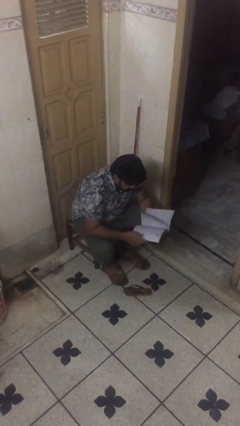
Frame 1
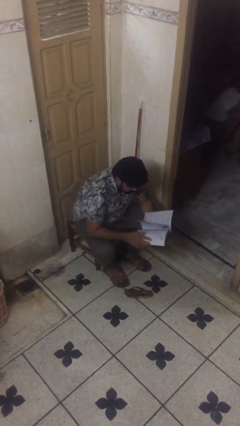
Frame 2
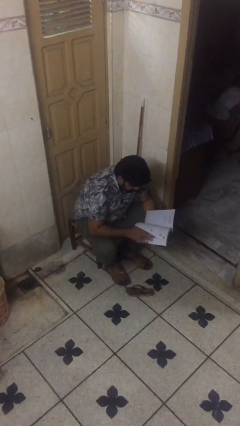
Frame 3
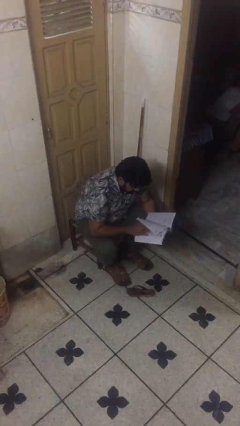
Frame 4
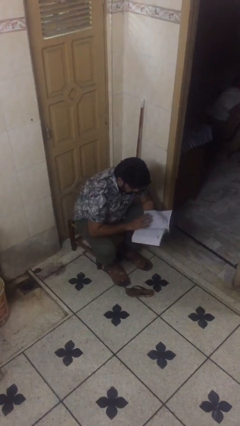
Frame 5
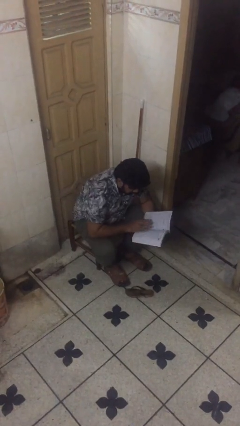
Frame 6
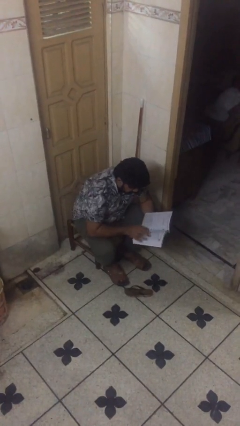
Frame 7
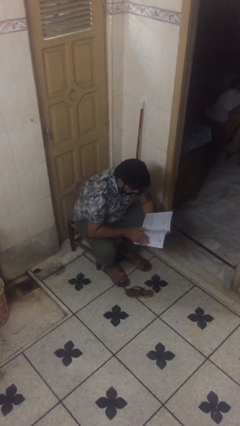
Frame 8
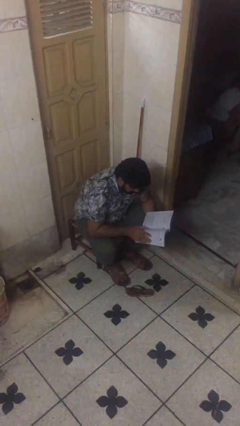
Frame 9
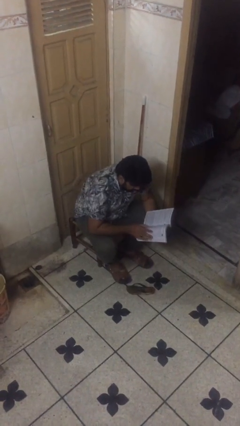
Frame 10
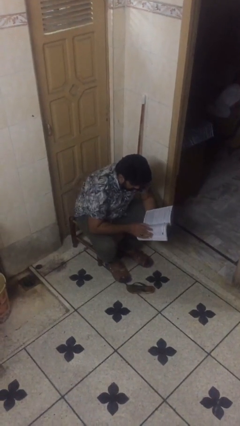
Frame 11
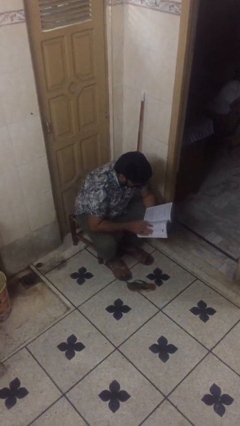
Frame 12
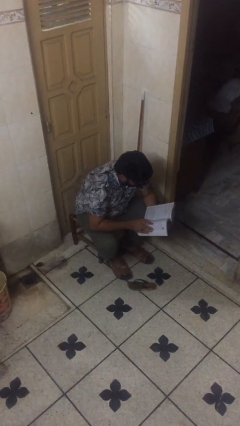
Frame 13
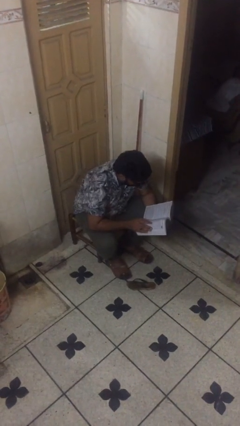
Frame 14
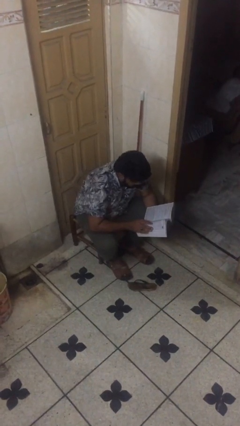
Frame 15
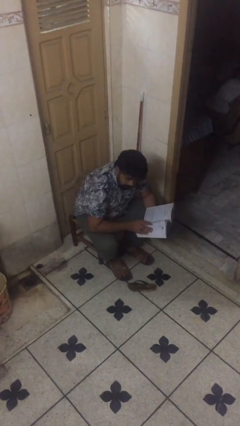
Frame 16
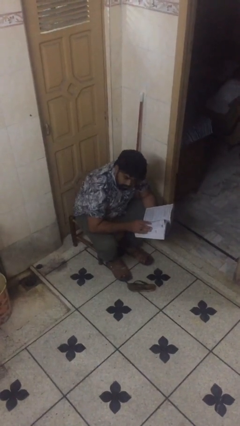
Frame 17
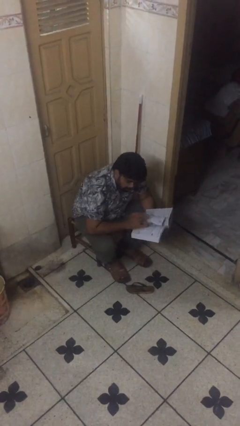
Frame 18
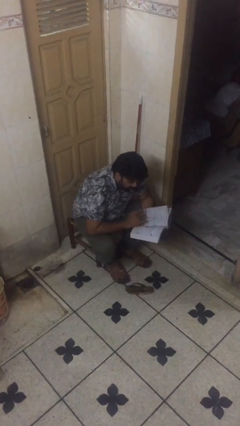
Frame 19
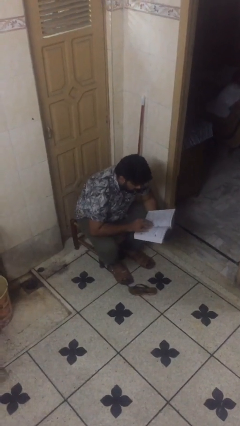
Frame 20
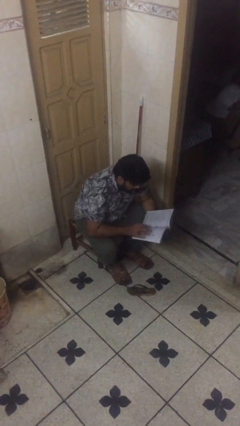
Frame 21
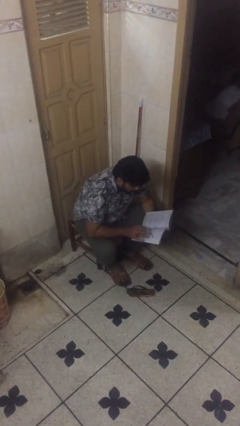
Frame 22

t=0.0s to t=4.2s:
person reads document

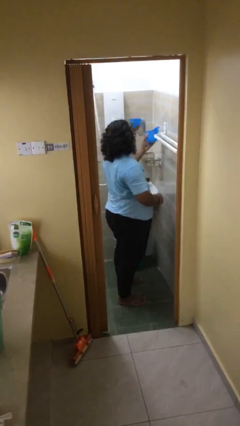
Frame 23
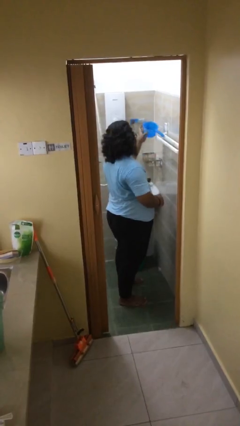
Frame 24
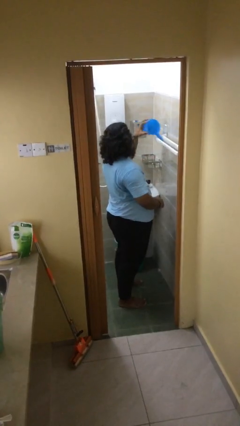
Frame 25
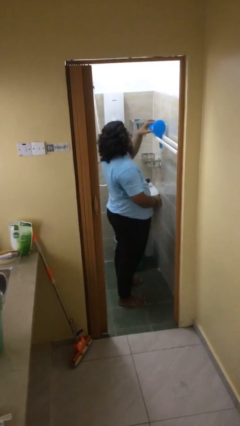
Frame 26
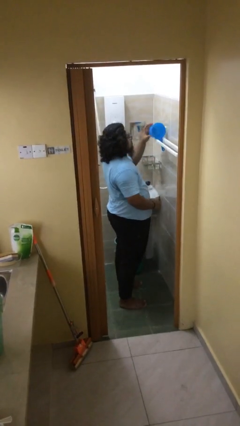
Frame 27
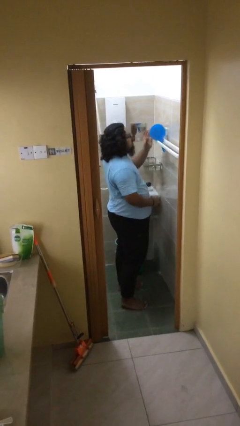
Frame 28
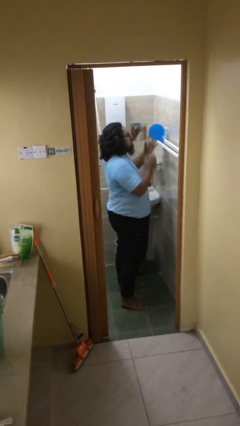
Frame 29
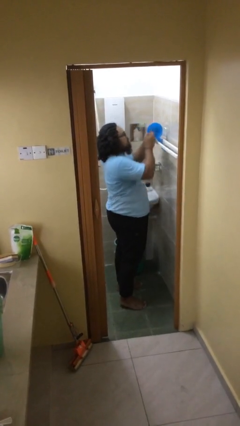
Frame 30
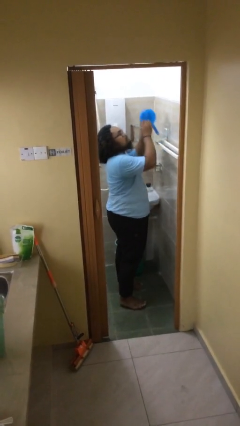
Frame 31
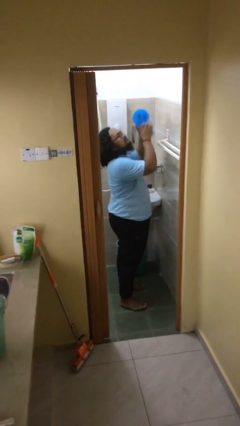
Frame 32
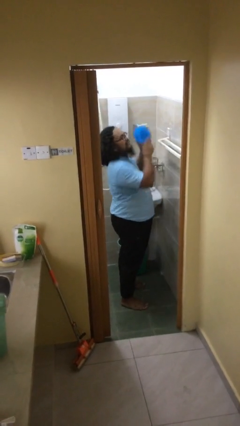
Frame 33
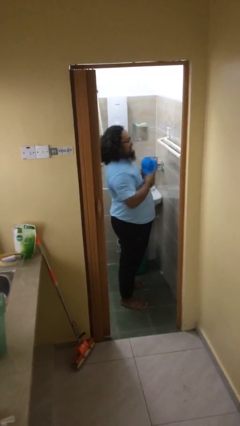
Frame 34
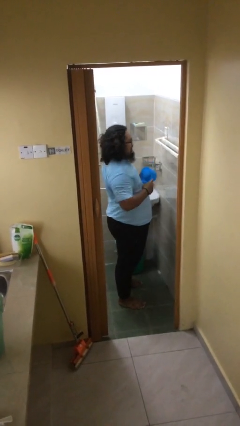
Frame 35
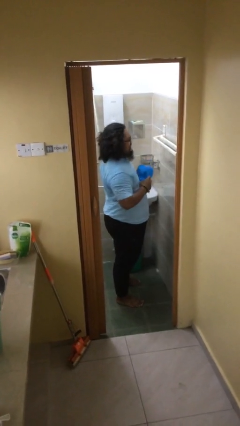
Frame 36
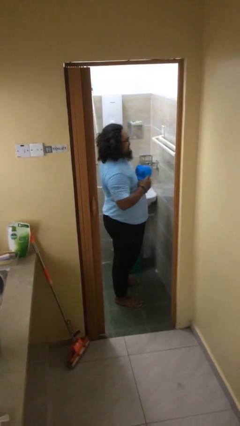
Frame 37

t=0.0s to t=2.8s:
person picks up object from countertop

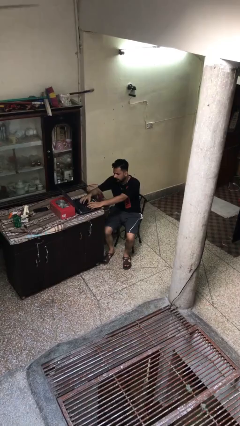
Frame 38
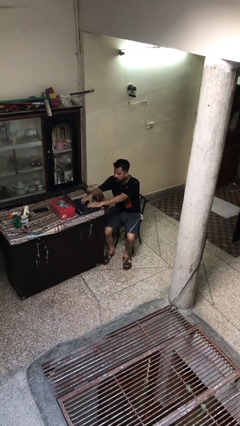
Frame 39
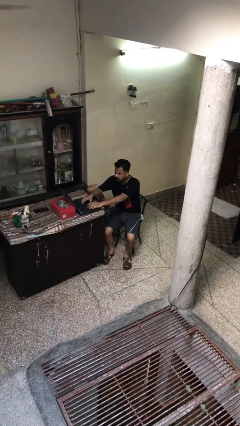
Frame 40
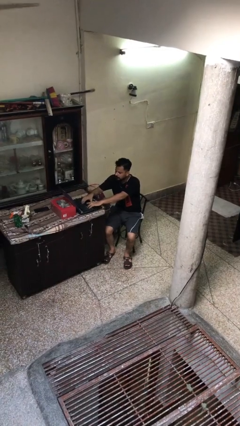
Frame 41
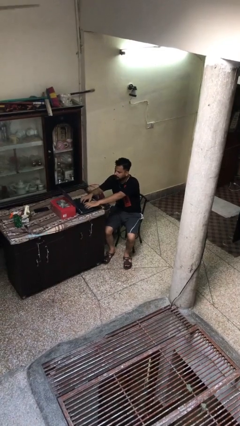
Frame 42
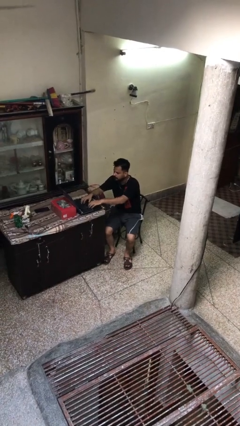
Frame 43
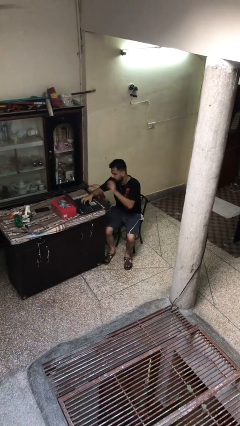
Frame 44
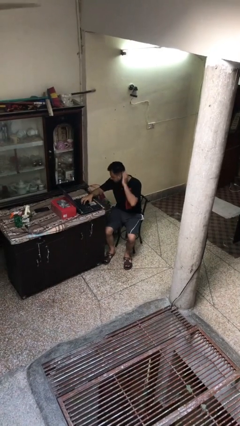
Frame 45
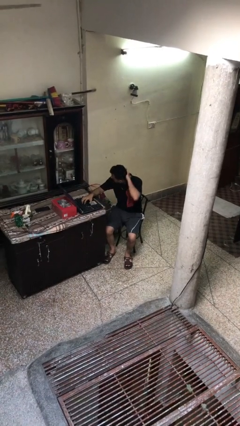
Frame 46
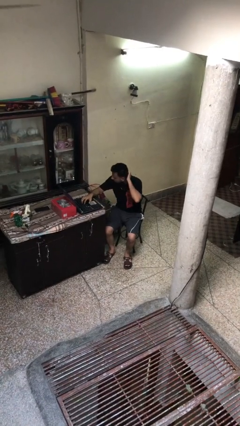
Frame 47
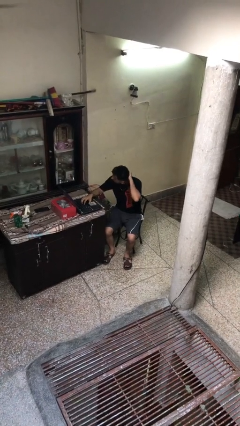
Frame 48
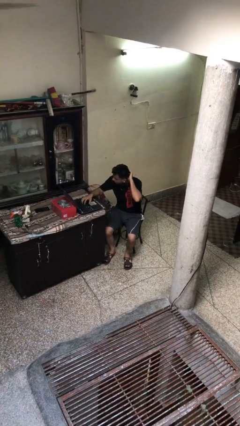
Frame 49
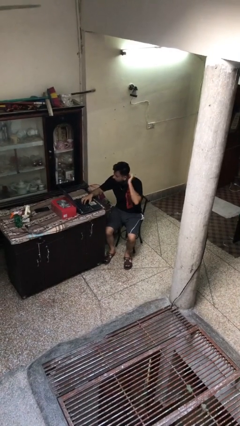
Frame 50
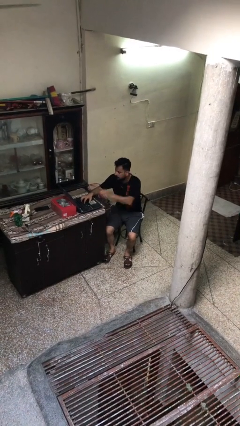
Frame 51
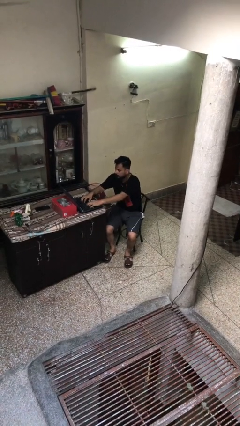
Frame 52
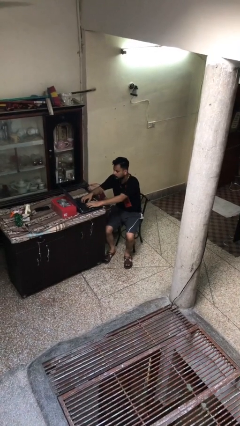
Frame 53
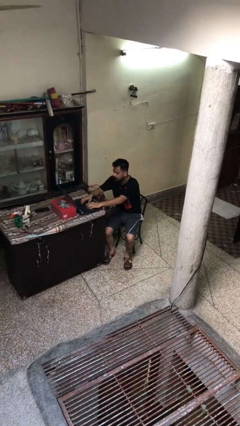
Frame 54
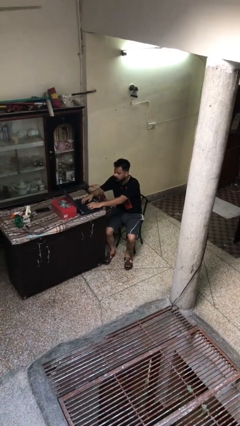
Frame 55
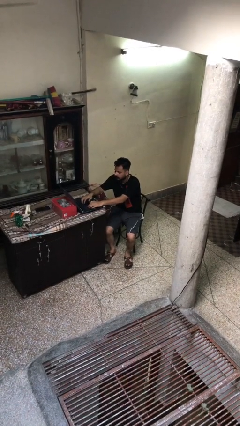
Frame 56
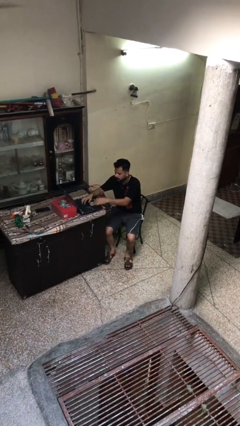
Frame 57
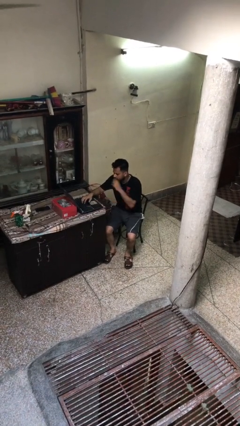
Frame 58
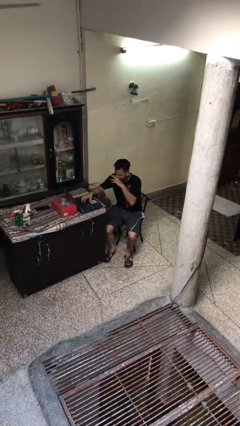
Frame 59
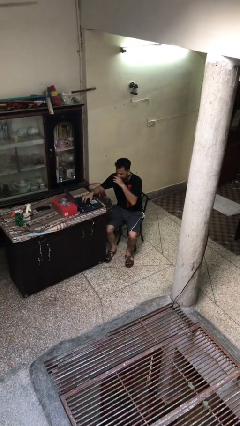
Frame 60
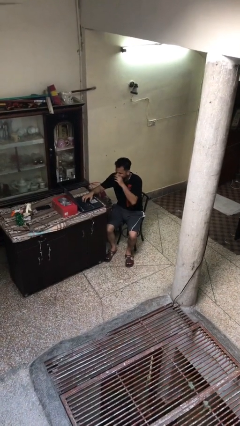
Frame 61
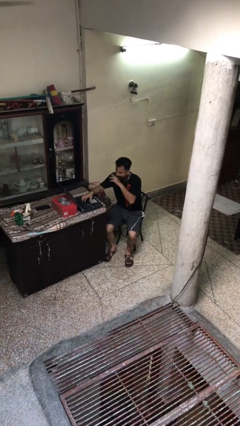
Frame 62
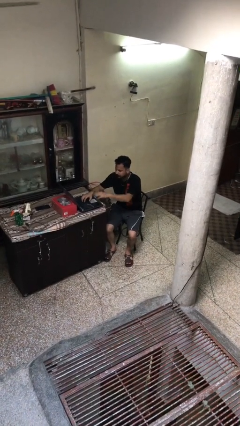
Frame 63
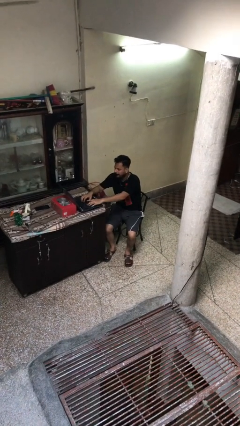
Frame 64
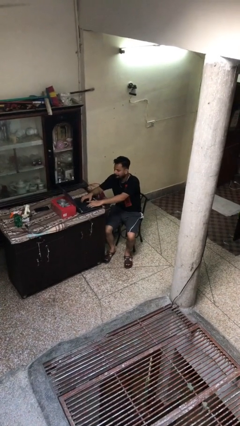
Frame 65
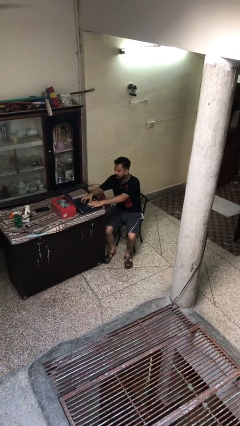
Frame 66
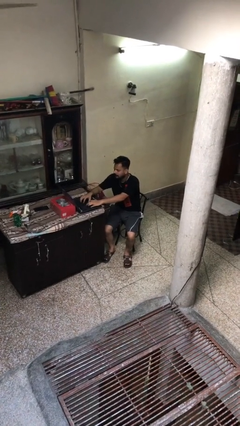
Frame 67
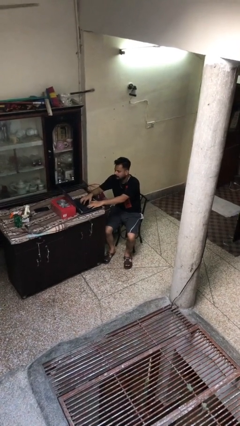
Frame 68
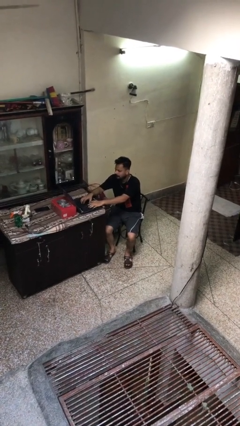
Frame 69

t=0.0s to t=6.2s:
person interacts with laptop

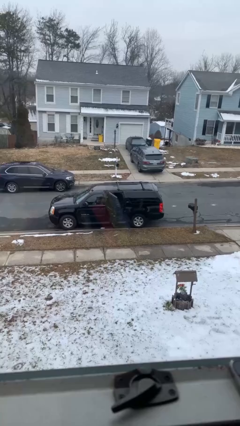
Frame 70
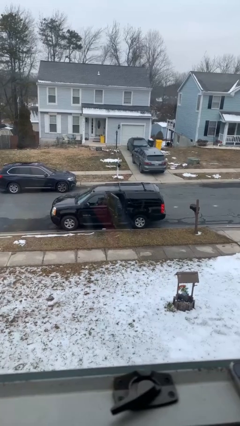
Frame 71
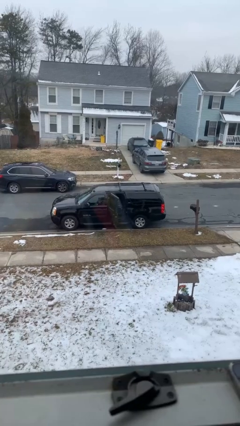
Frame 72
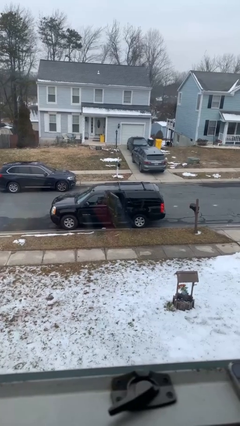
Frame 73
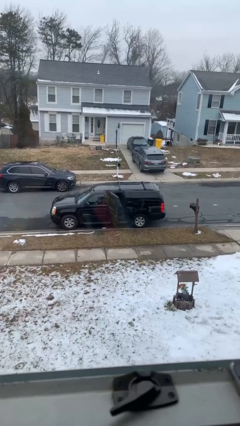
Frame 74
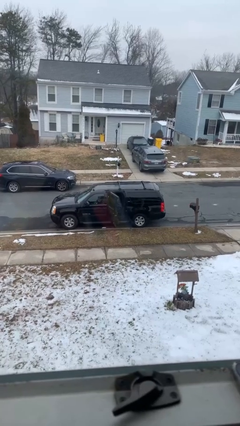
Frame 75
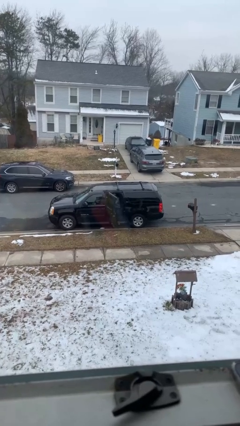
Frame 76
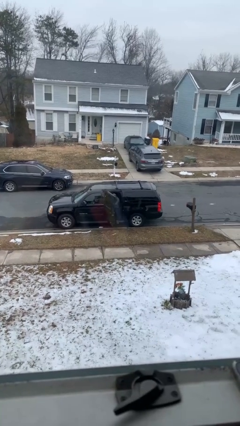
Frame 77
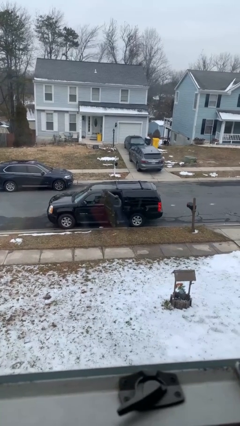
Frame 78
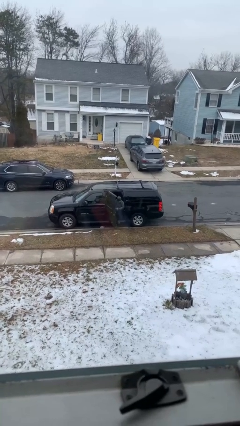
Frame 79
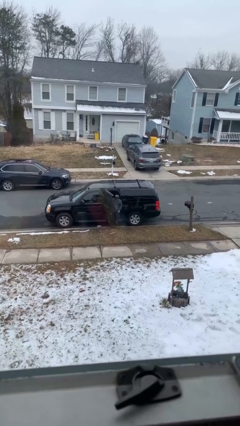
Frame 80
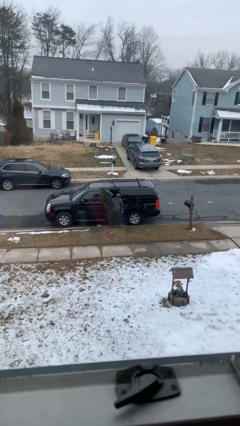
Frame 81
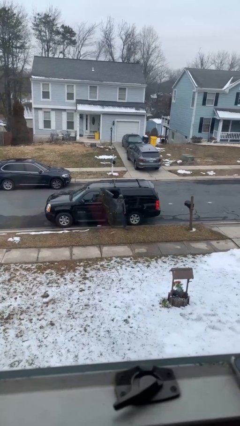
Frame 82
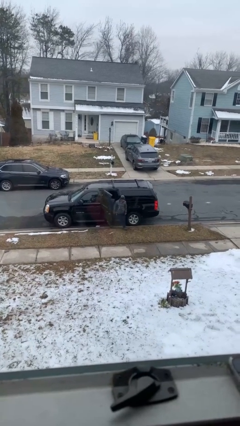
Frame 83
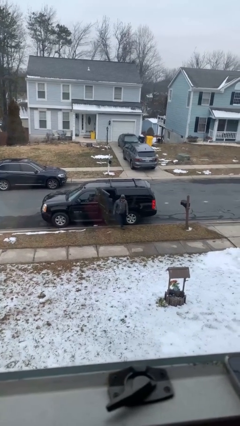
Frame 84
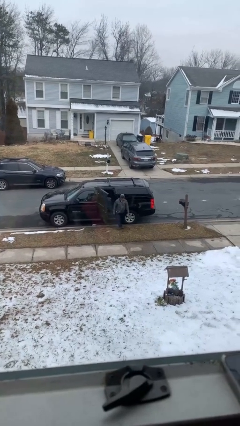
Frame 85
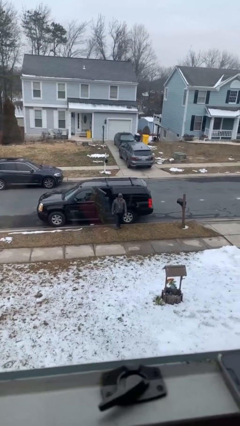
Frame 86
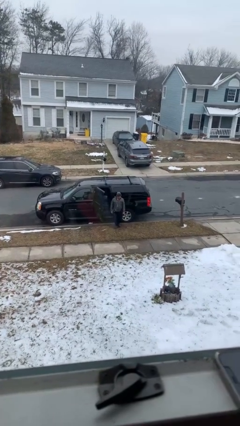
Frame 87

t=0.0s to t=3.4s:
person exits car

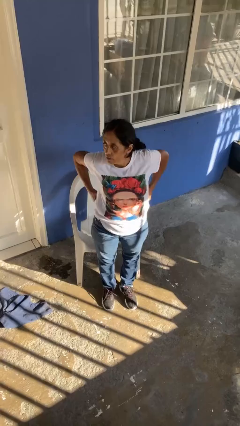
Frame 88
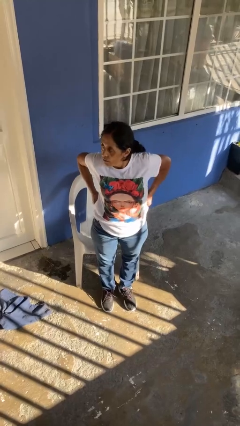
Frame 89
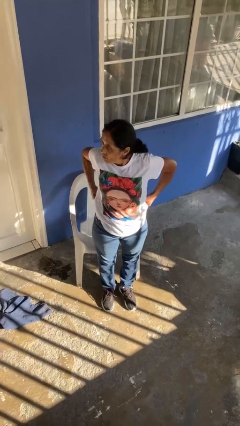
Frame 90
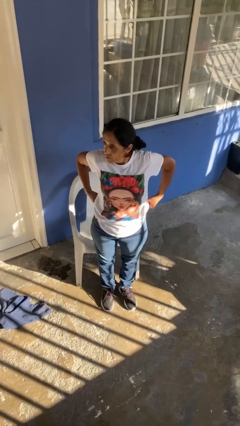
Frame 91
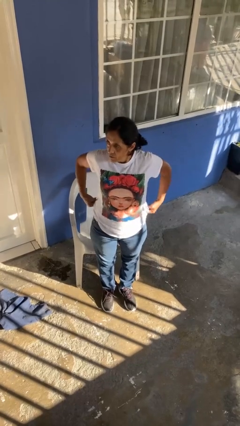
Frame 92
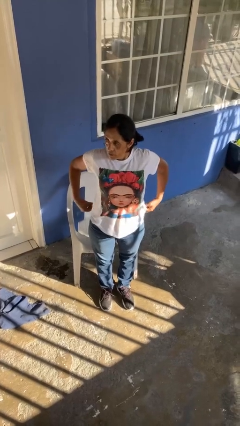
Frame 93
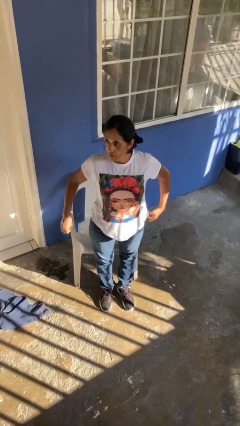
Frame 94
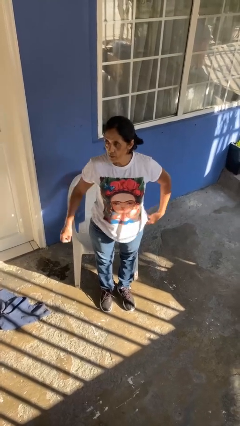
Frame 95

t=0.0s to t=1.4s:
person hikes up pants
